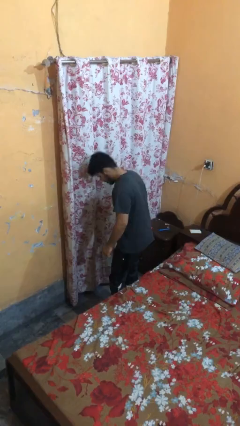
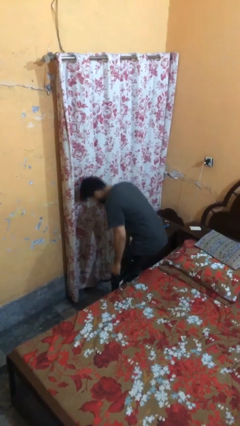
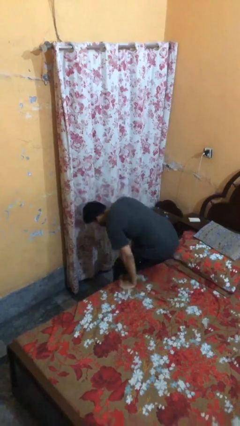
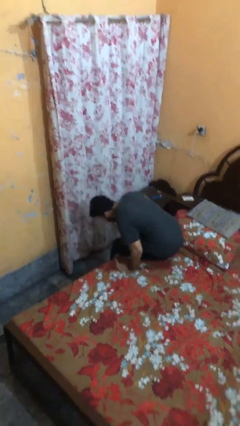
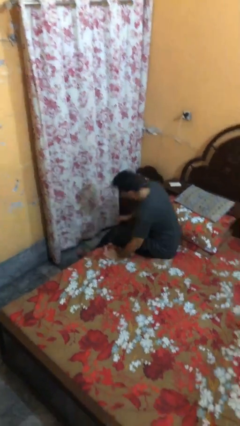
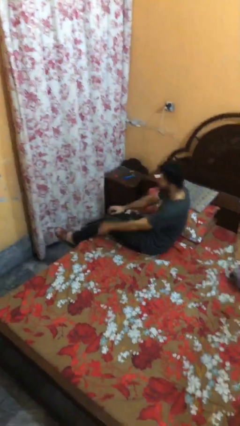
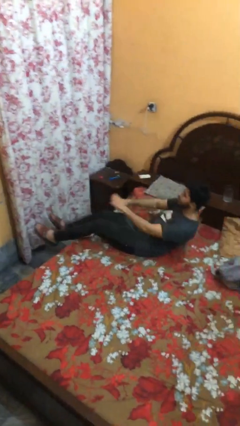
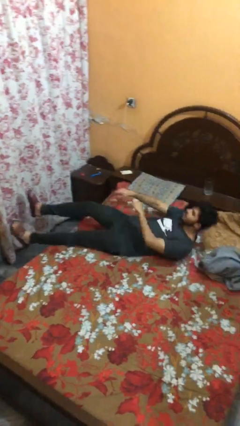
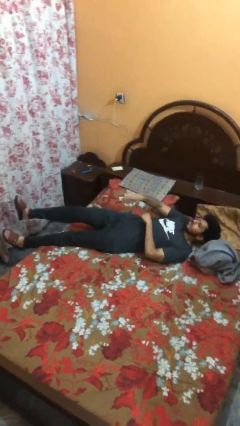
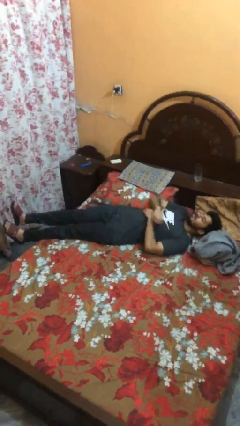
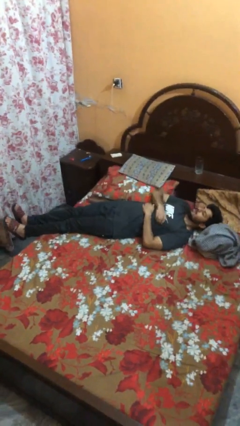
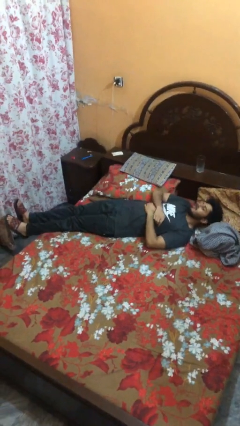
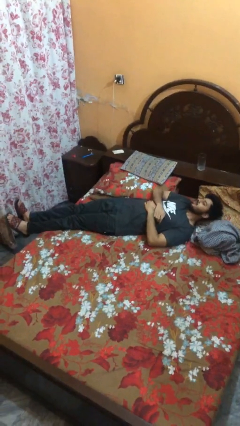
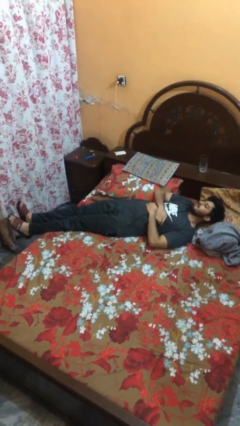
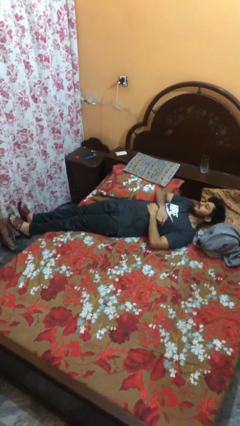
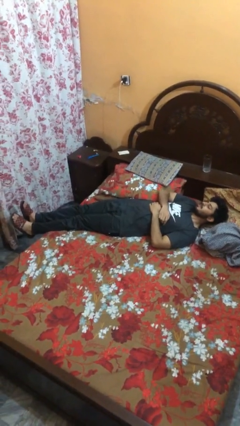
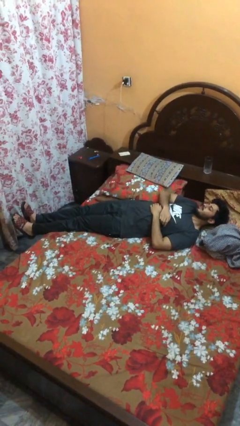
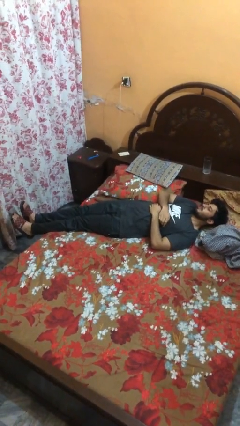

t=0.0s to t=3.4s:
person lies down on bed

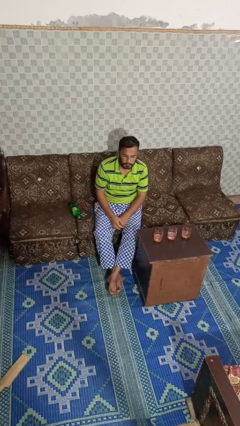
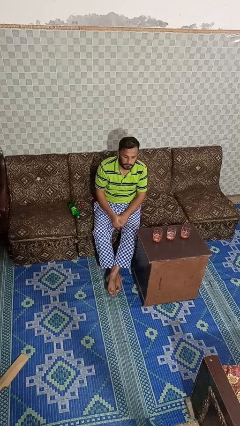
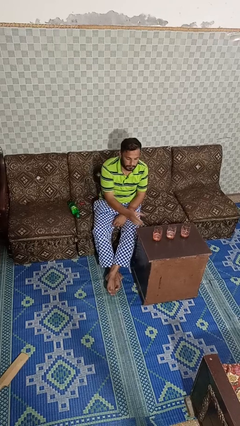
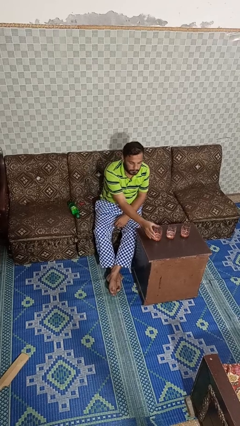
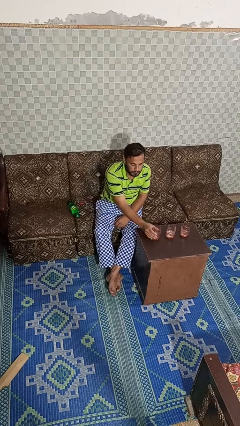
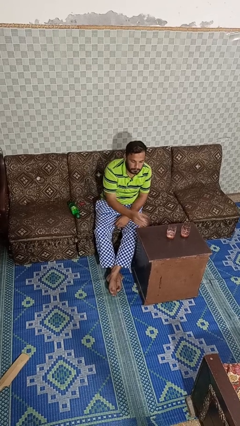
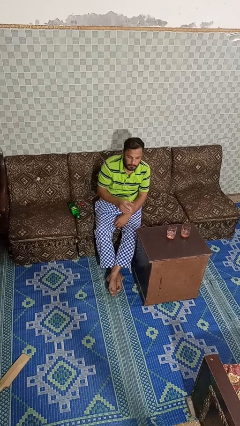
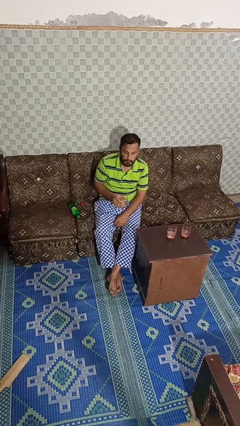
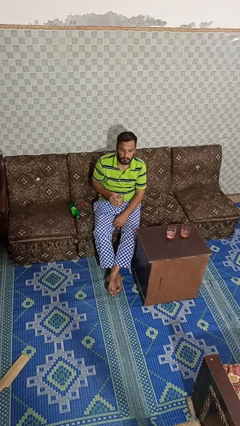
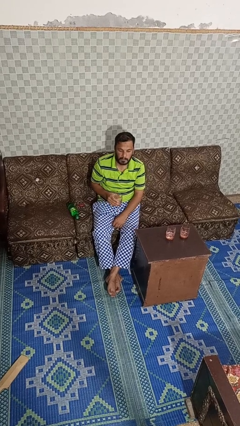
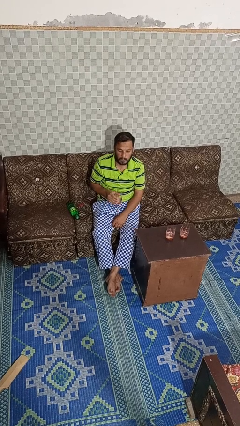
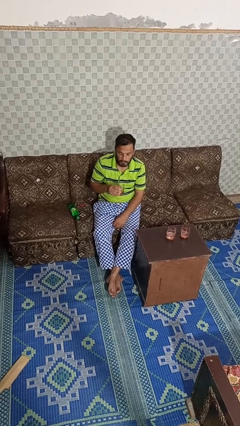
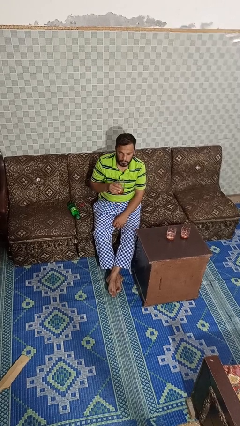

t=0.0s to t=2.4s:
person picks up object from table

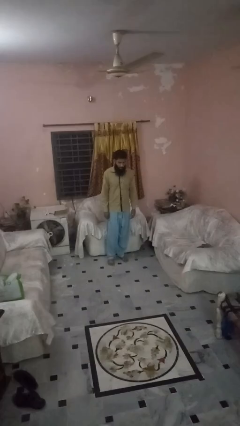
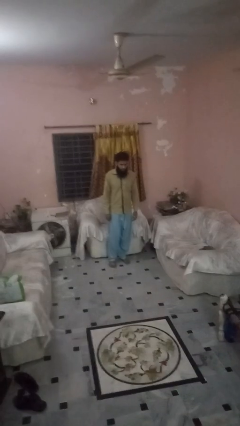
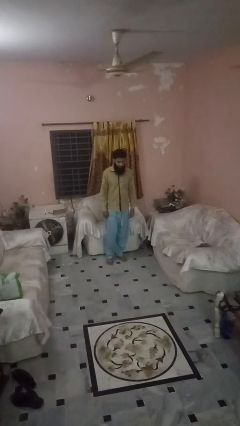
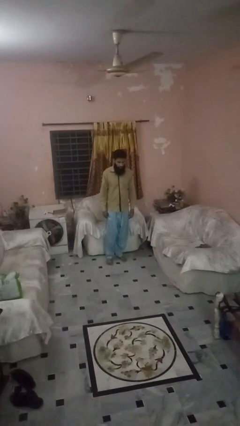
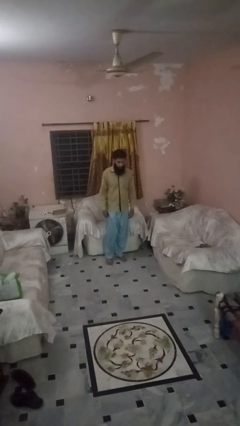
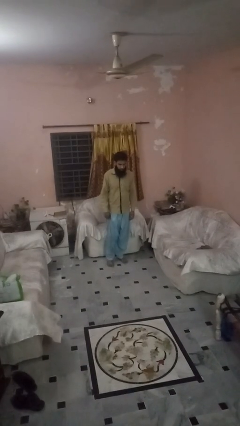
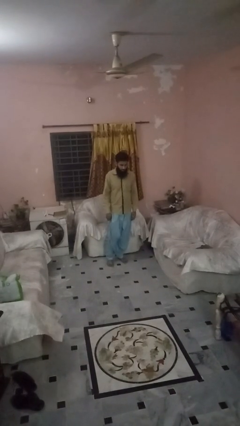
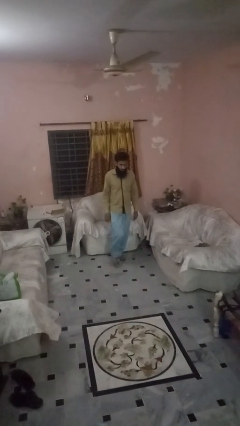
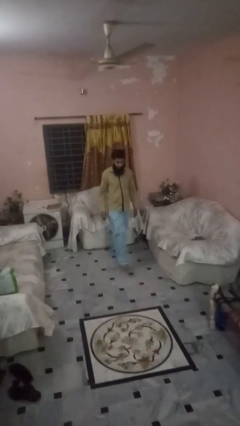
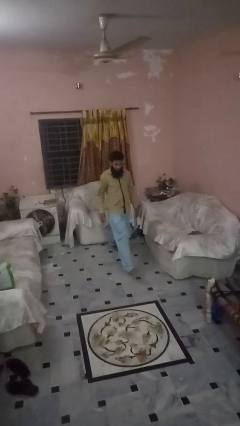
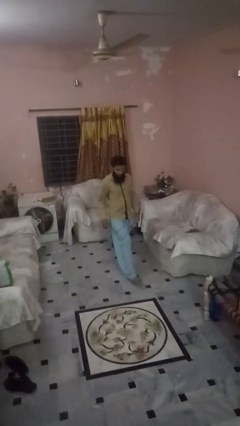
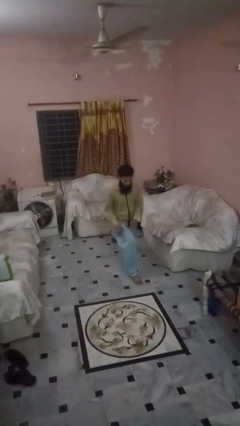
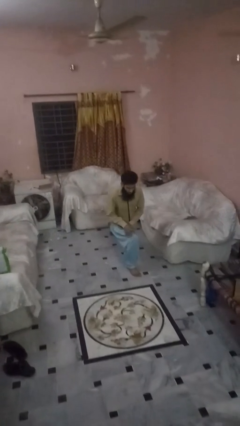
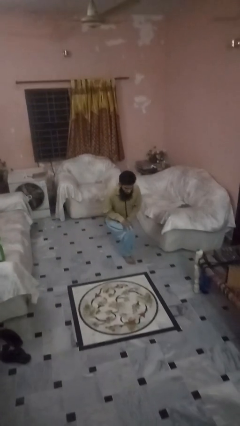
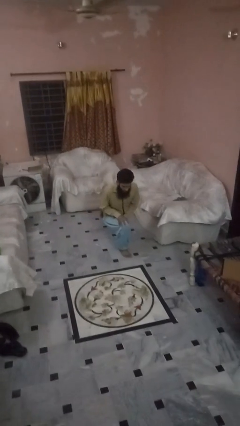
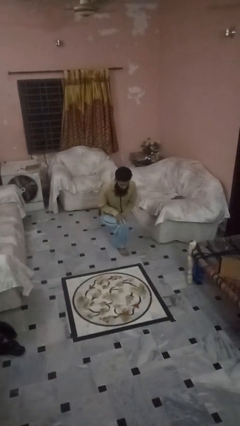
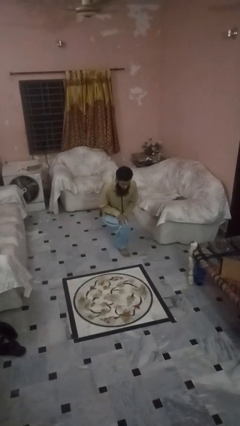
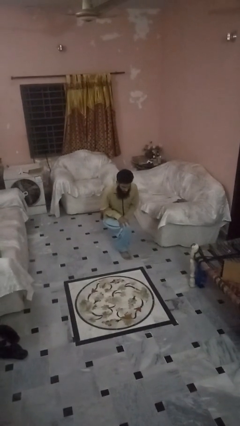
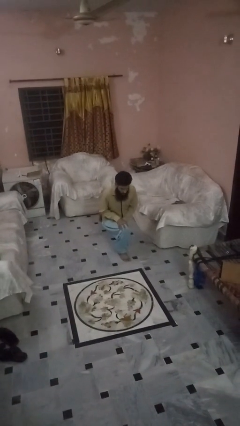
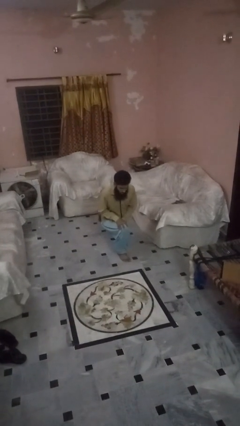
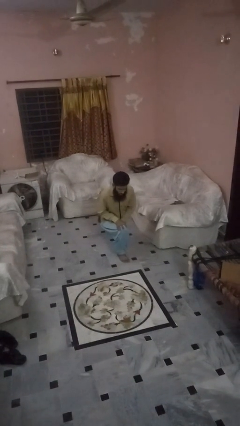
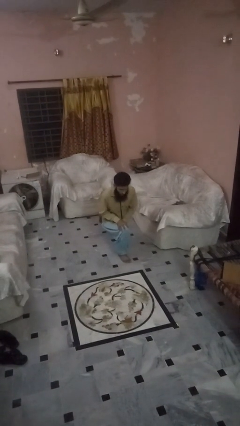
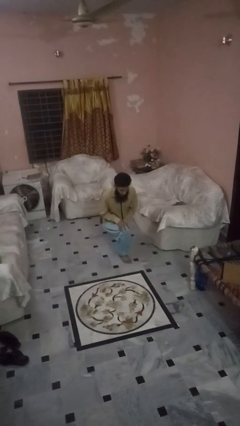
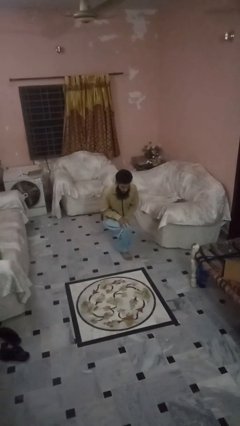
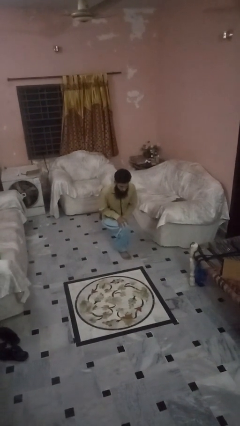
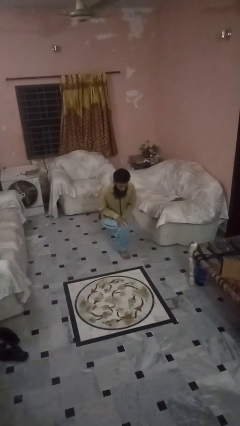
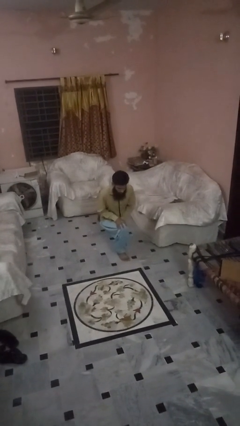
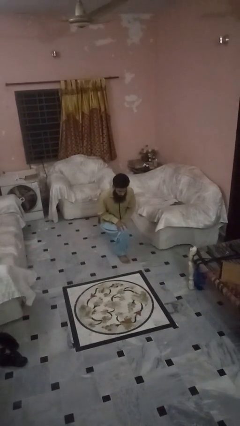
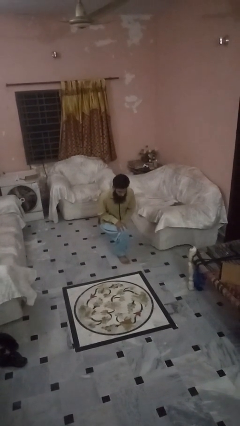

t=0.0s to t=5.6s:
person exercises with lunges

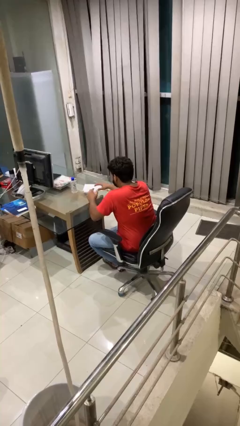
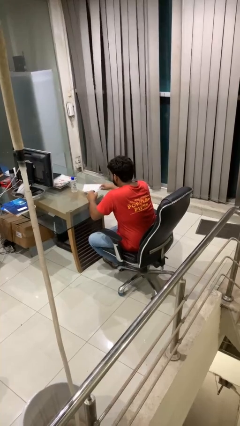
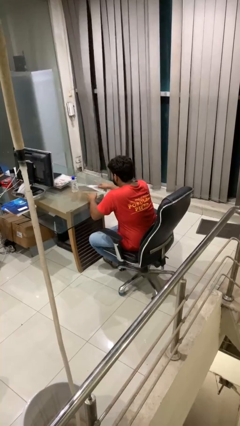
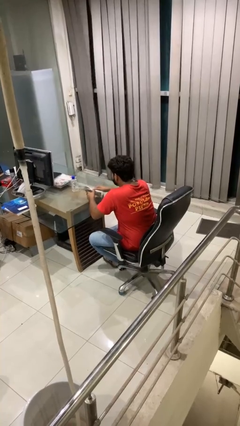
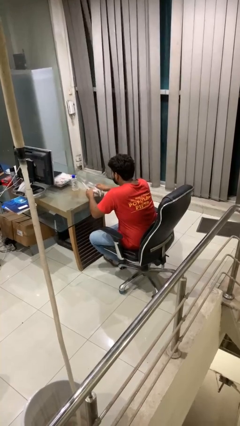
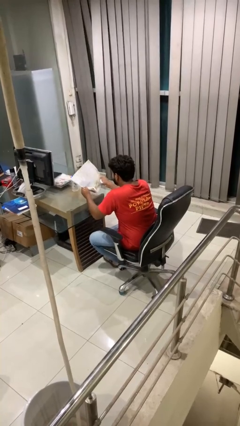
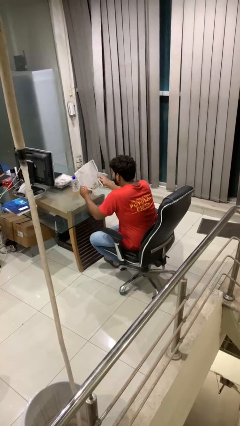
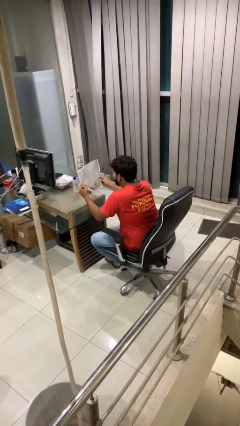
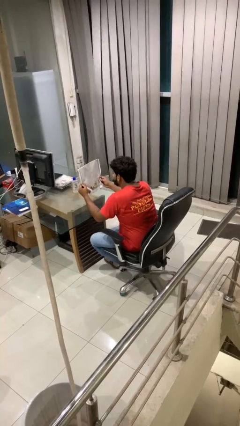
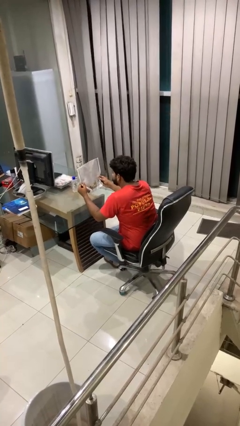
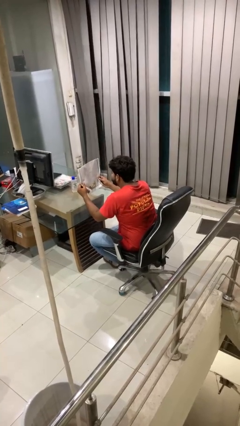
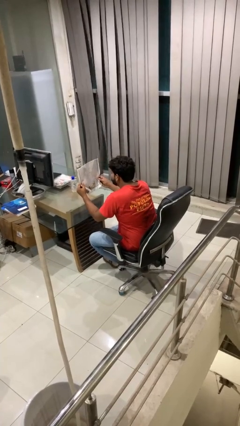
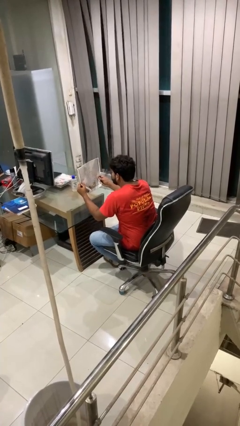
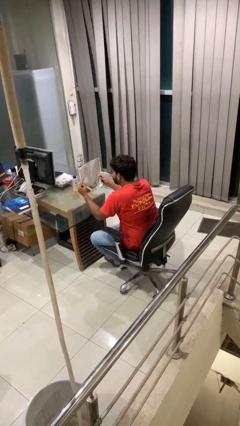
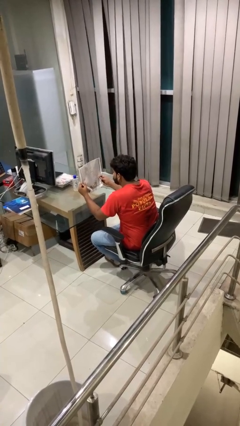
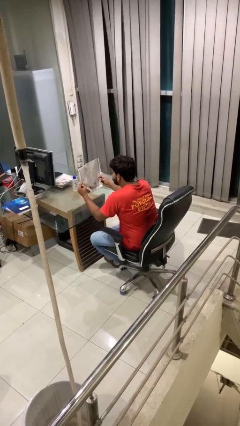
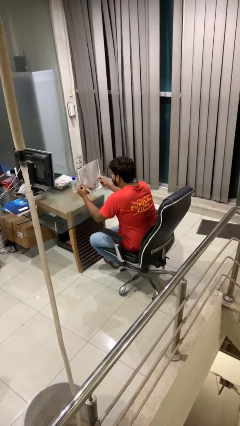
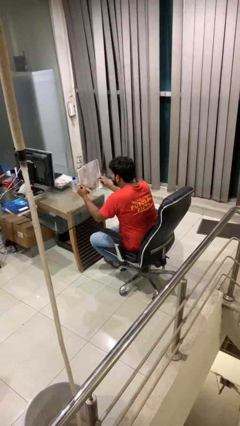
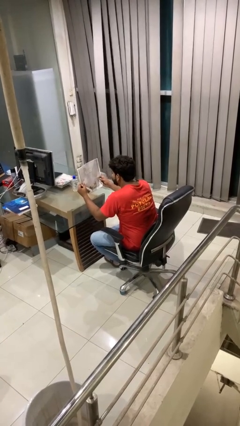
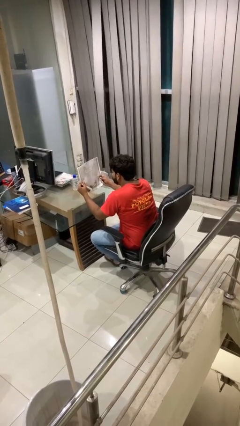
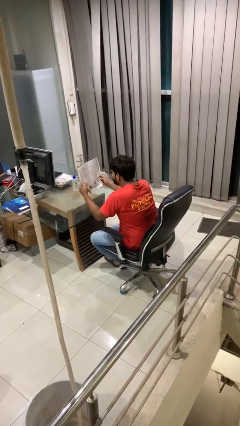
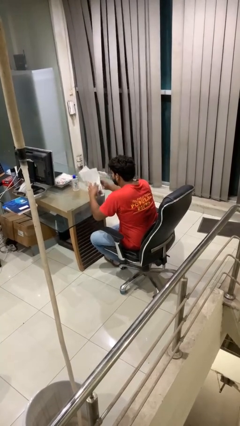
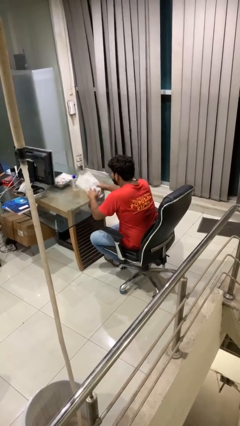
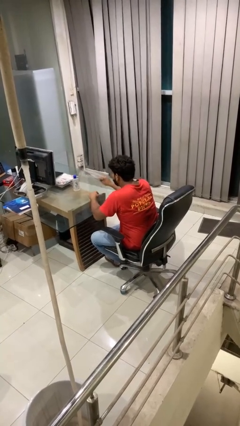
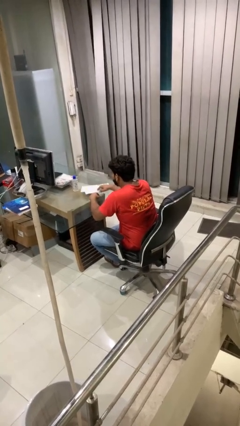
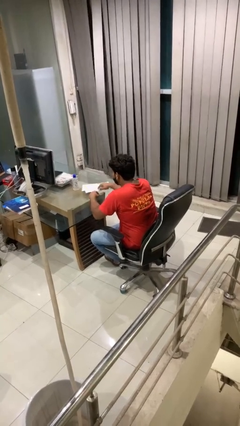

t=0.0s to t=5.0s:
person reads newspaper

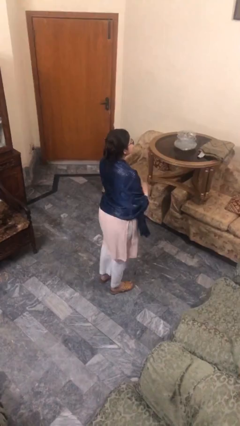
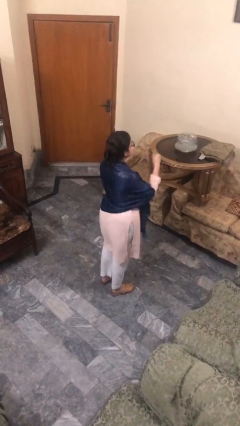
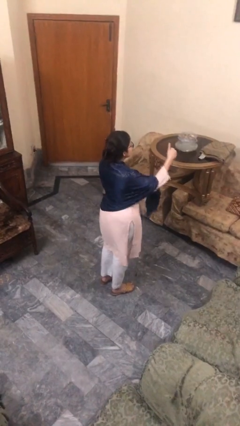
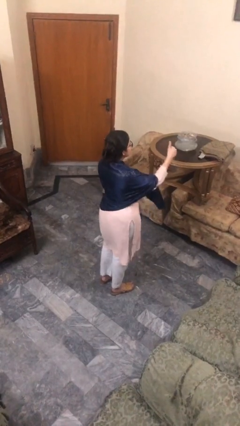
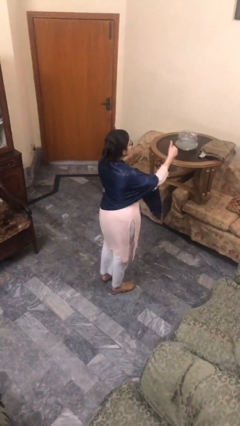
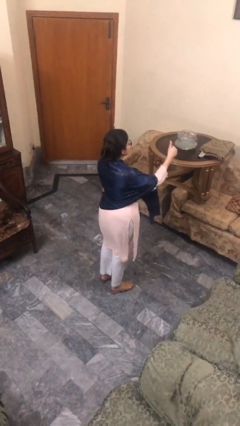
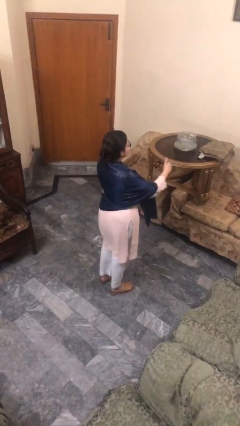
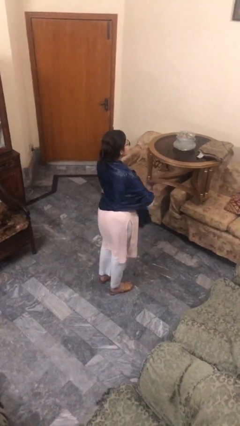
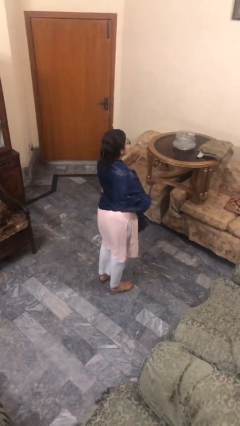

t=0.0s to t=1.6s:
person gestures thumbs up
